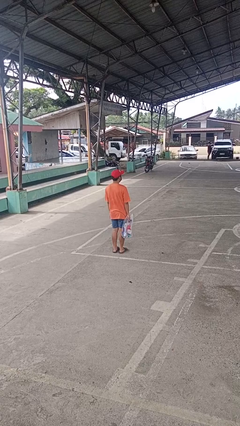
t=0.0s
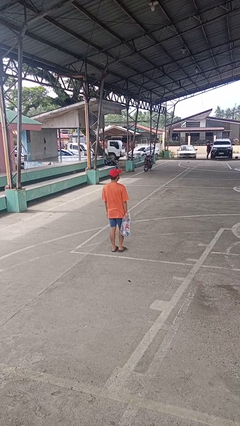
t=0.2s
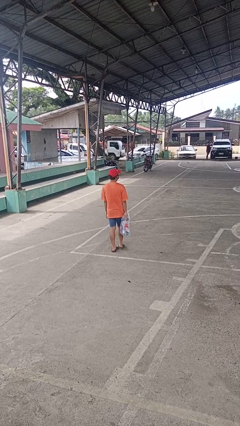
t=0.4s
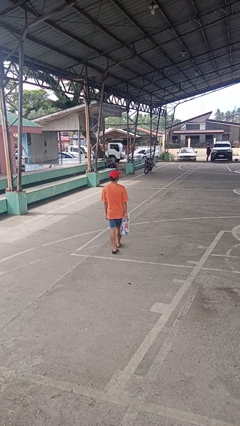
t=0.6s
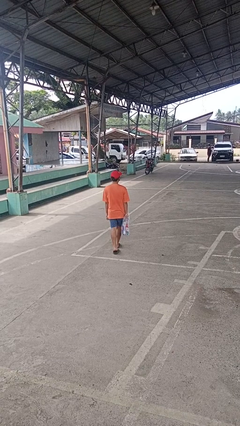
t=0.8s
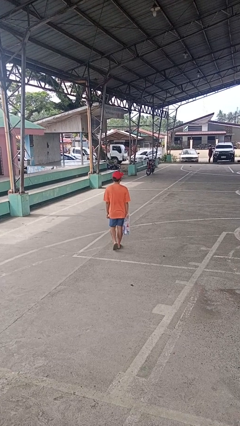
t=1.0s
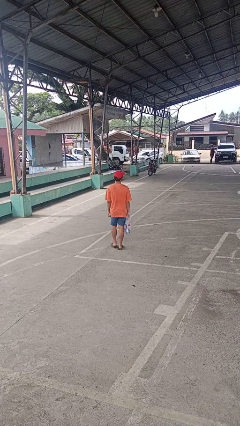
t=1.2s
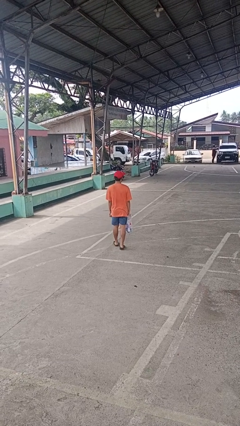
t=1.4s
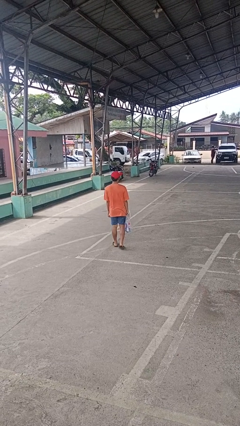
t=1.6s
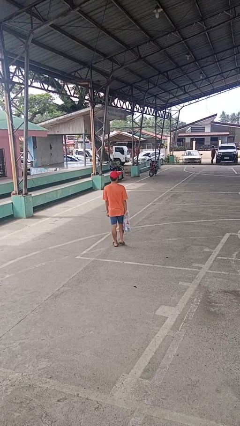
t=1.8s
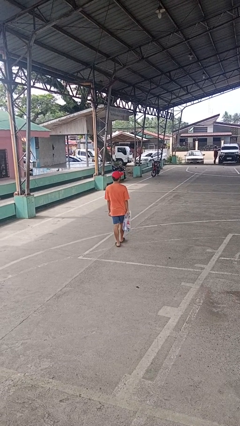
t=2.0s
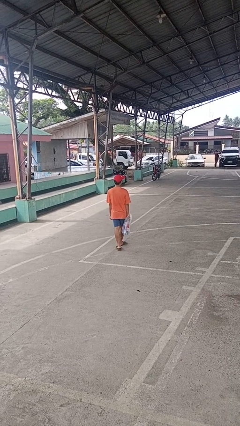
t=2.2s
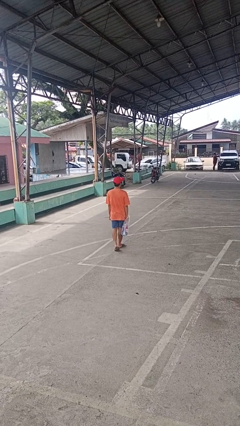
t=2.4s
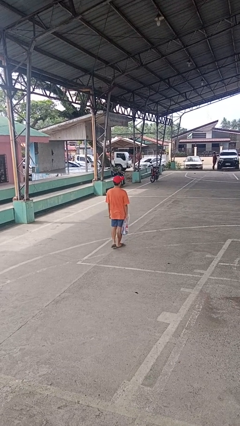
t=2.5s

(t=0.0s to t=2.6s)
person carries groceries

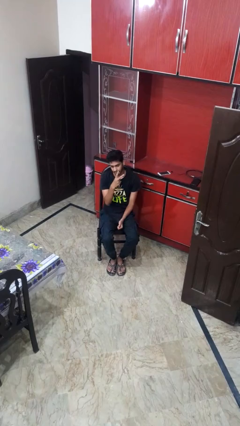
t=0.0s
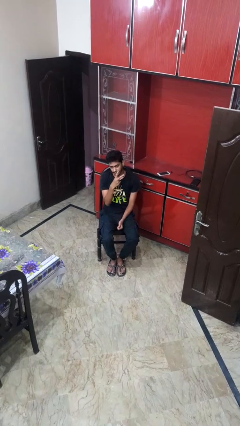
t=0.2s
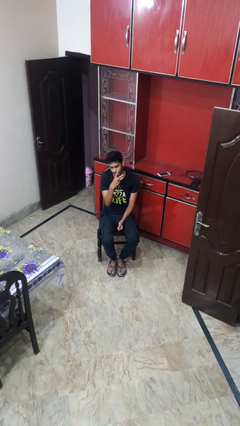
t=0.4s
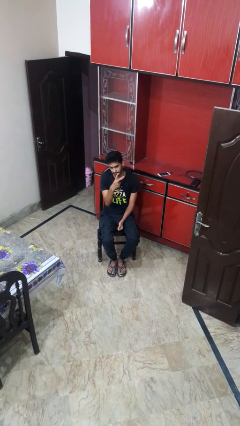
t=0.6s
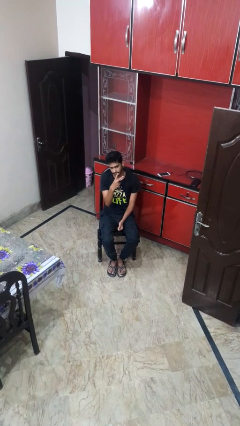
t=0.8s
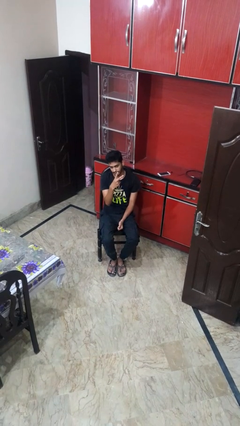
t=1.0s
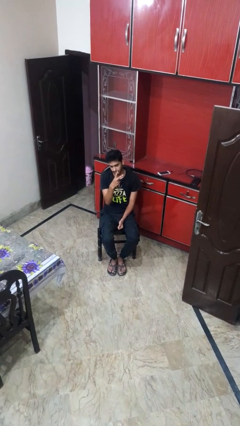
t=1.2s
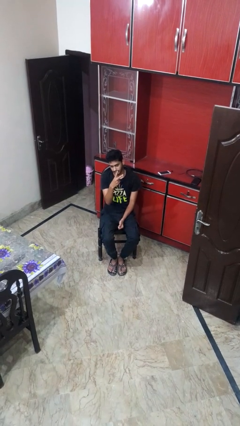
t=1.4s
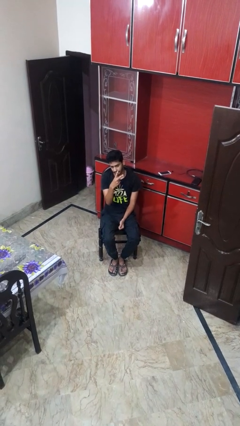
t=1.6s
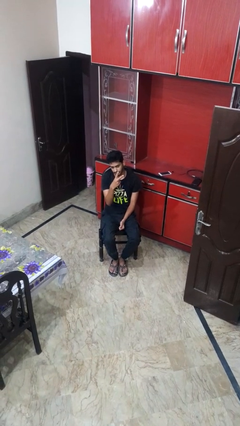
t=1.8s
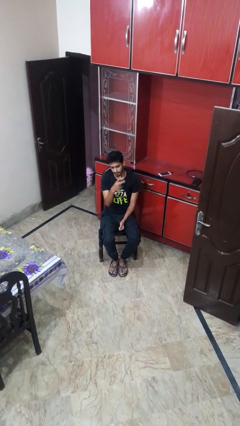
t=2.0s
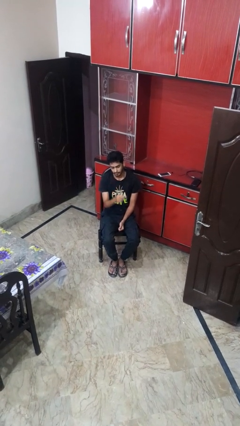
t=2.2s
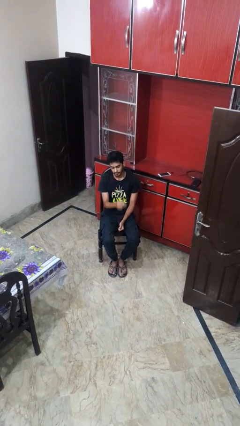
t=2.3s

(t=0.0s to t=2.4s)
person gestures peace

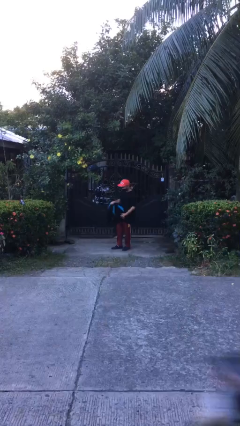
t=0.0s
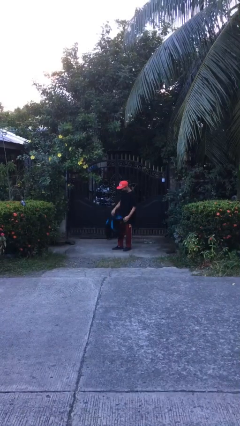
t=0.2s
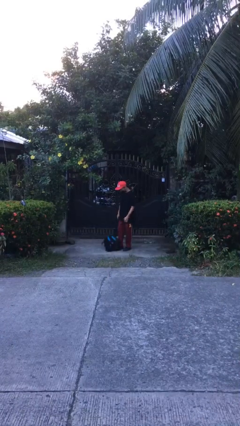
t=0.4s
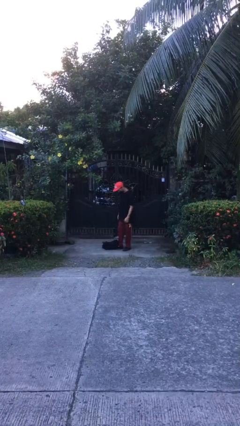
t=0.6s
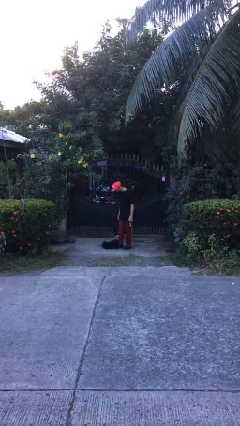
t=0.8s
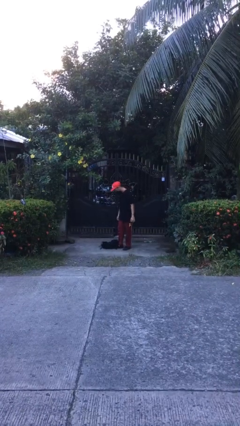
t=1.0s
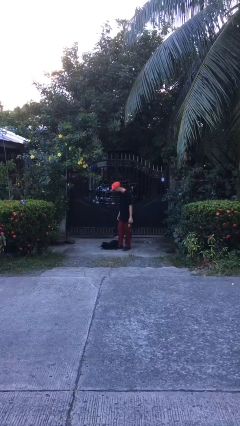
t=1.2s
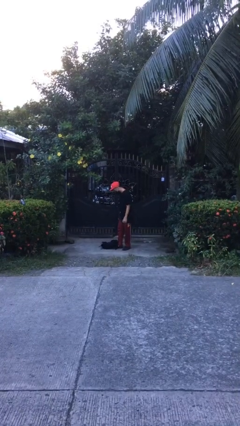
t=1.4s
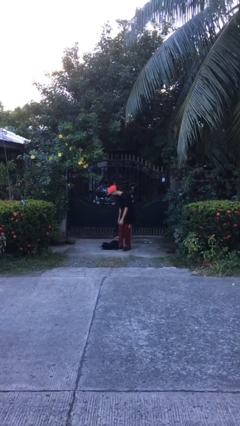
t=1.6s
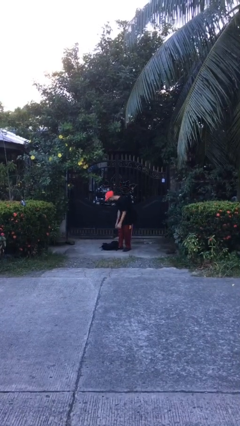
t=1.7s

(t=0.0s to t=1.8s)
person drops object

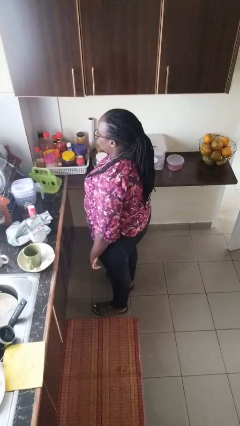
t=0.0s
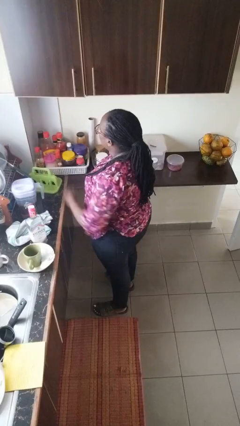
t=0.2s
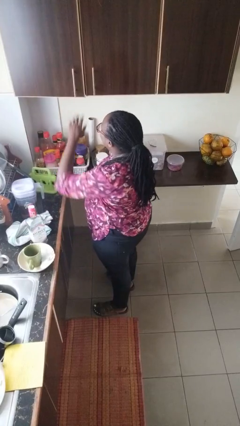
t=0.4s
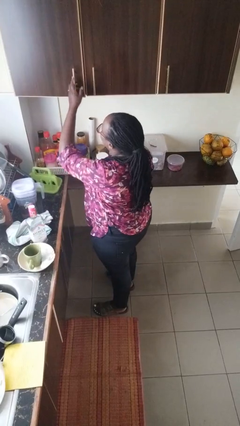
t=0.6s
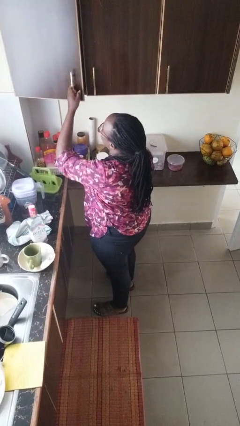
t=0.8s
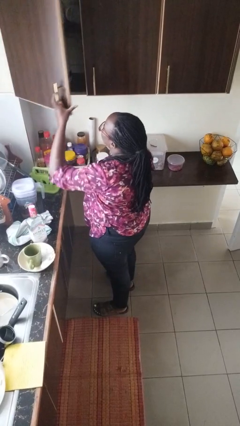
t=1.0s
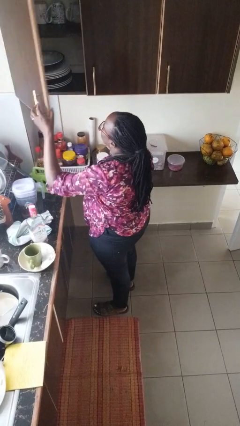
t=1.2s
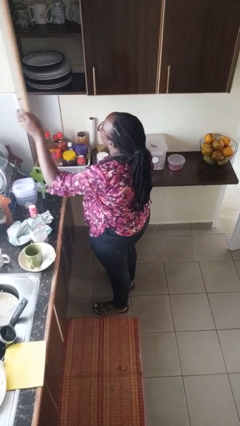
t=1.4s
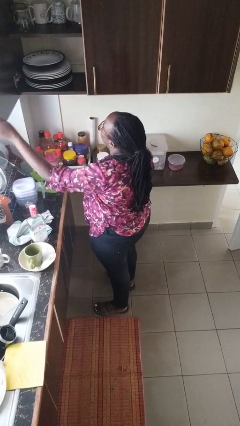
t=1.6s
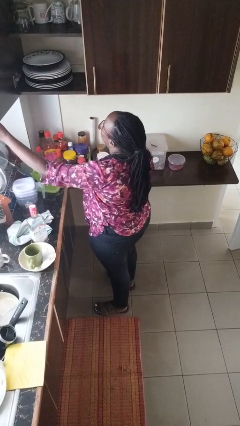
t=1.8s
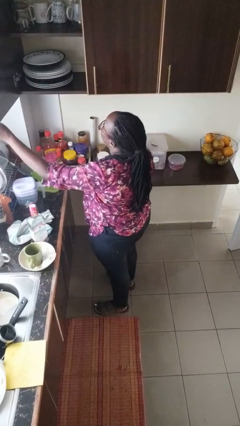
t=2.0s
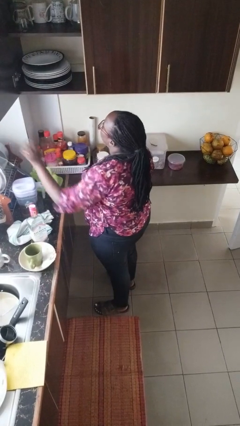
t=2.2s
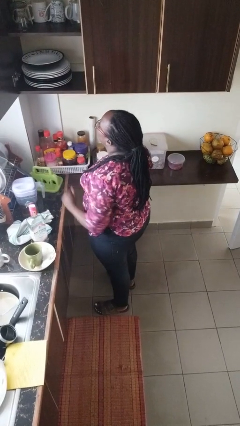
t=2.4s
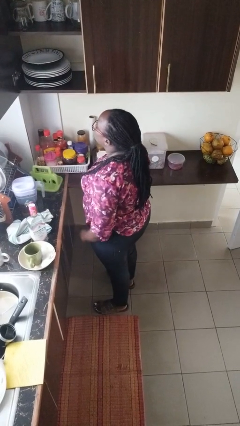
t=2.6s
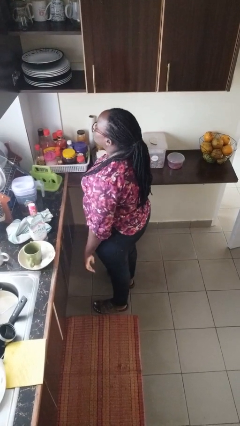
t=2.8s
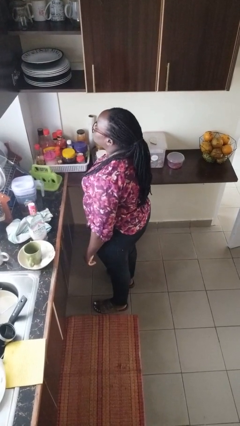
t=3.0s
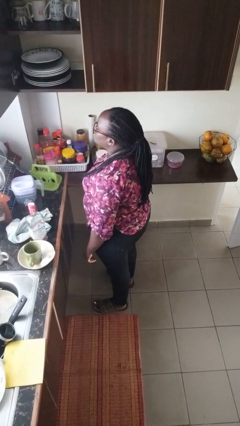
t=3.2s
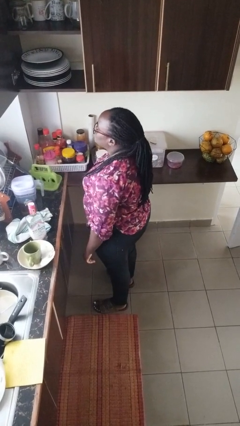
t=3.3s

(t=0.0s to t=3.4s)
person opens cabinet

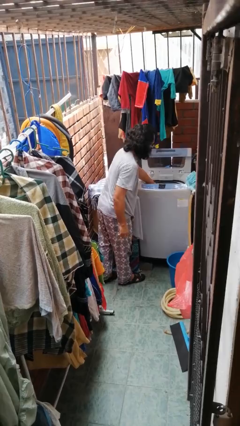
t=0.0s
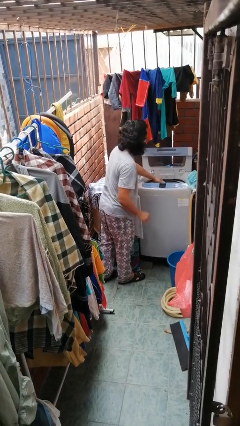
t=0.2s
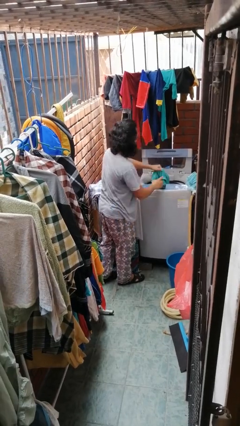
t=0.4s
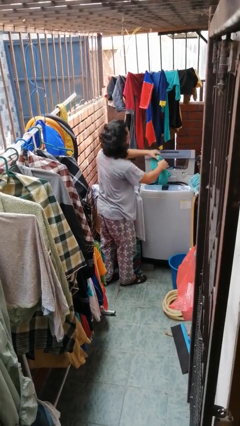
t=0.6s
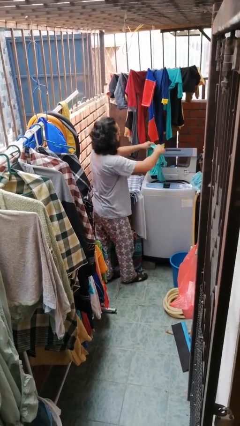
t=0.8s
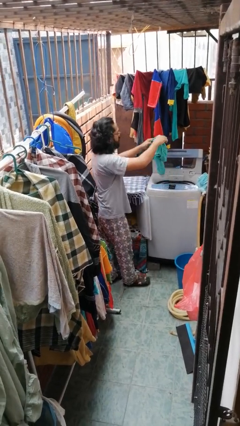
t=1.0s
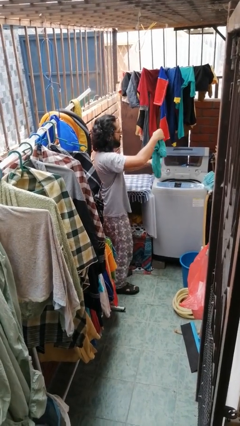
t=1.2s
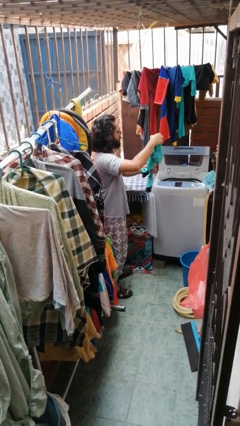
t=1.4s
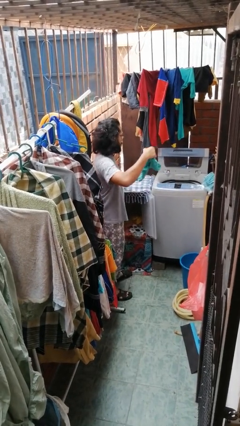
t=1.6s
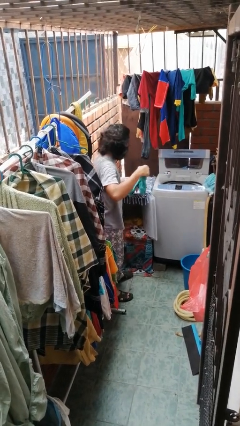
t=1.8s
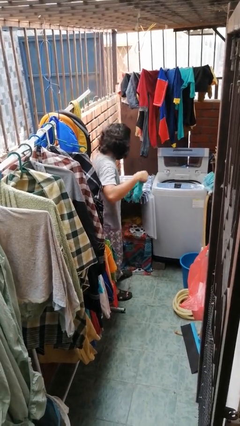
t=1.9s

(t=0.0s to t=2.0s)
person unloads clotheswasher

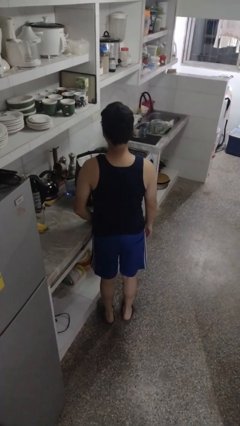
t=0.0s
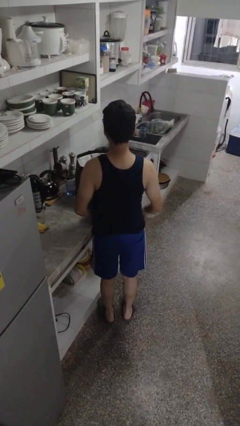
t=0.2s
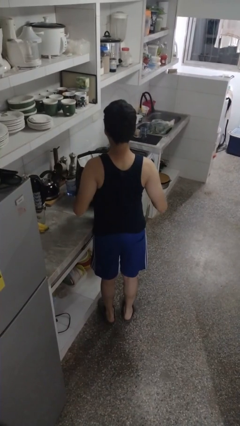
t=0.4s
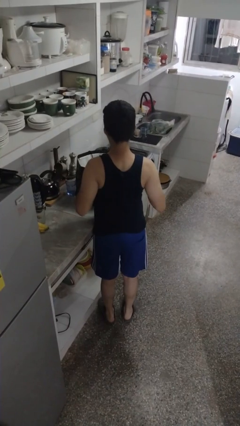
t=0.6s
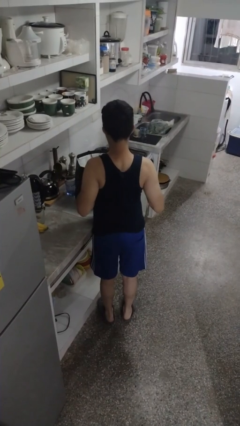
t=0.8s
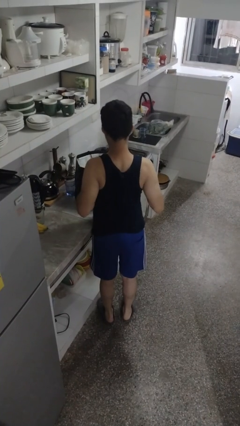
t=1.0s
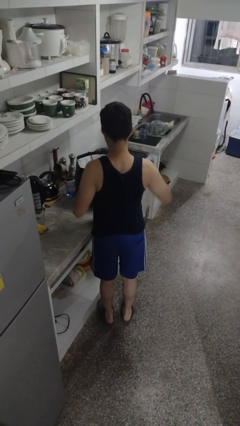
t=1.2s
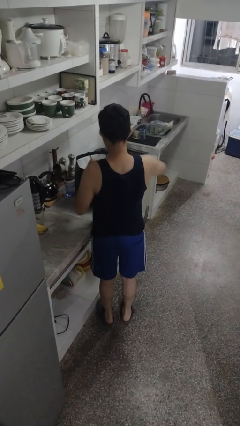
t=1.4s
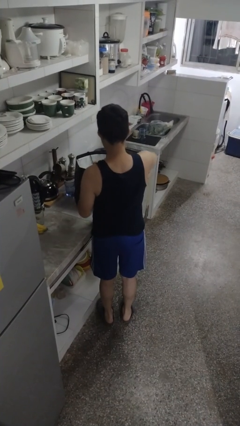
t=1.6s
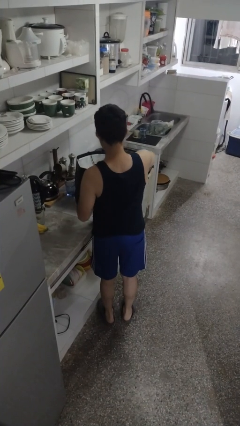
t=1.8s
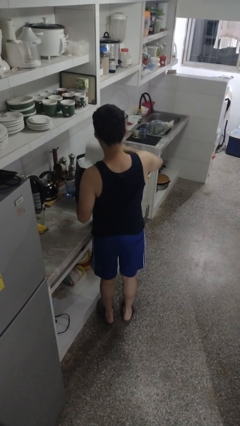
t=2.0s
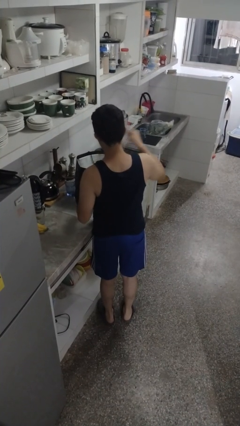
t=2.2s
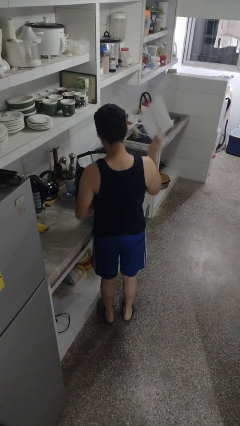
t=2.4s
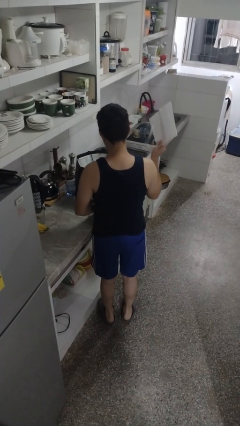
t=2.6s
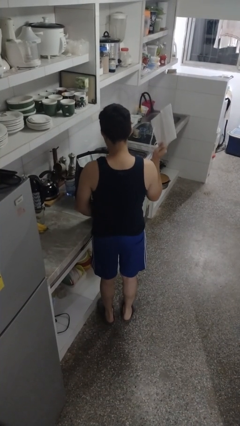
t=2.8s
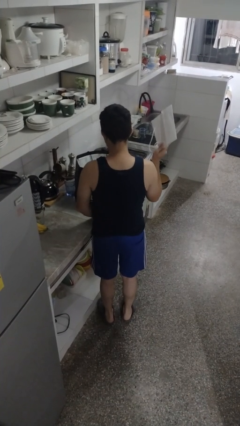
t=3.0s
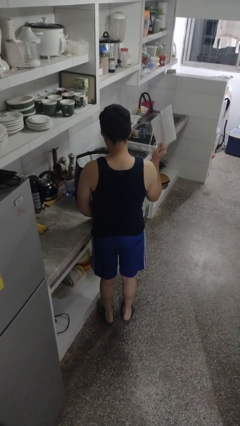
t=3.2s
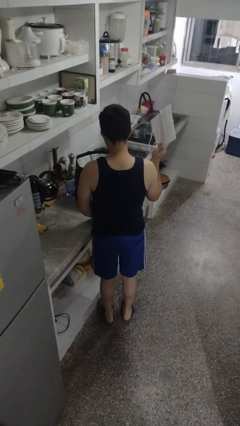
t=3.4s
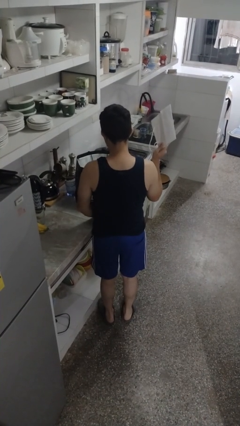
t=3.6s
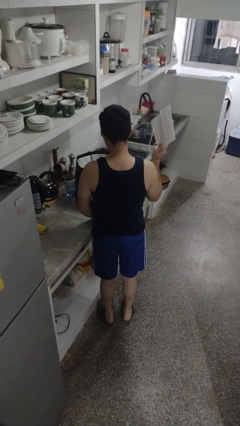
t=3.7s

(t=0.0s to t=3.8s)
person takes object from bag

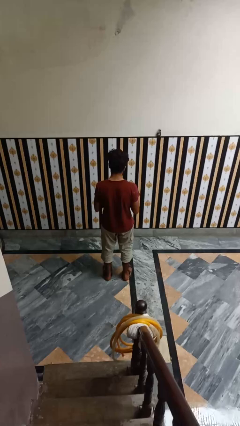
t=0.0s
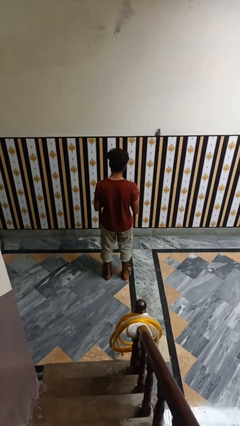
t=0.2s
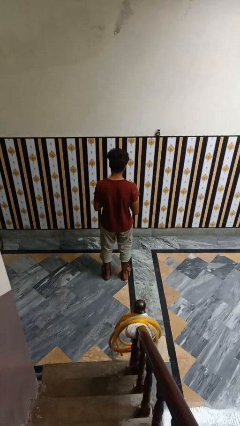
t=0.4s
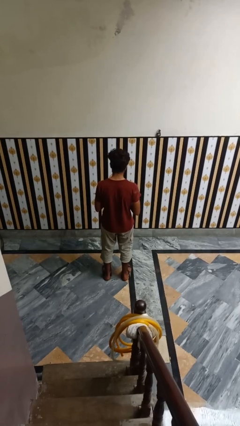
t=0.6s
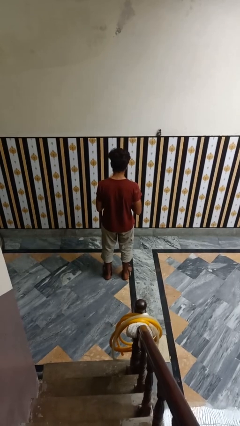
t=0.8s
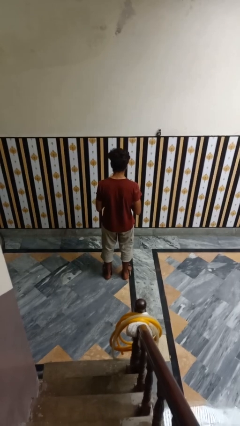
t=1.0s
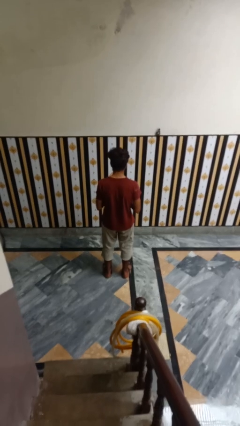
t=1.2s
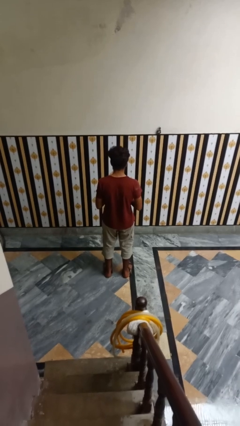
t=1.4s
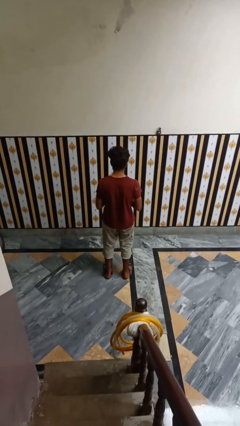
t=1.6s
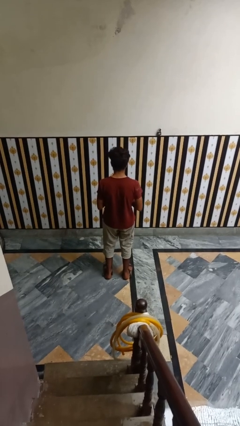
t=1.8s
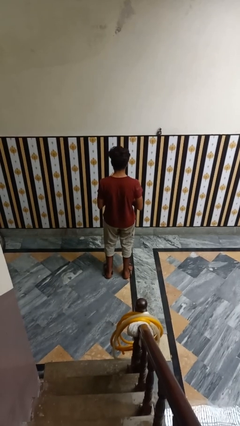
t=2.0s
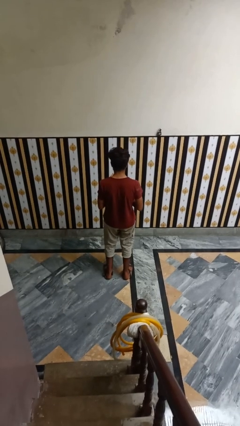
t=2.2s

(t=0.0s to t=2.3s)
person picks up object from floor
